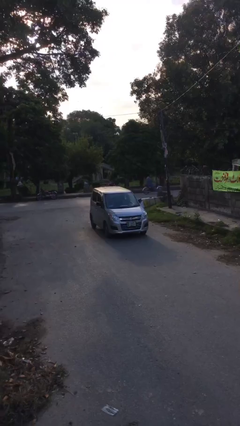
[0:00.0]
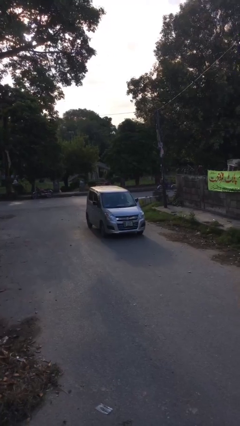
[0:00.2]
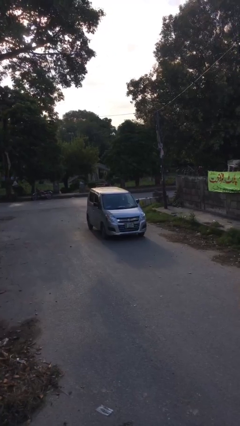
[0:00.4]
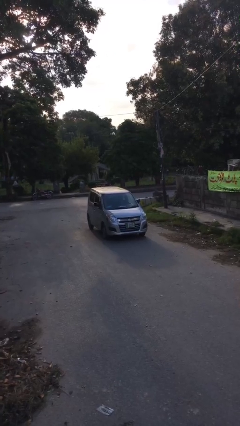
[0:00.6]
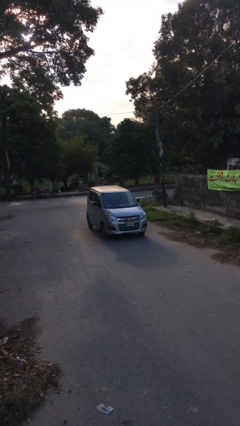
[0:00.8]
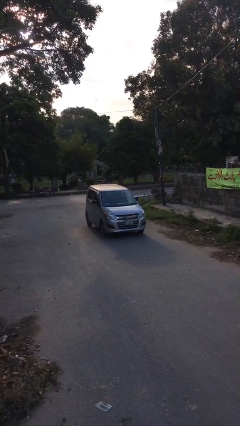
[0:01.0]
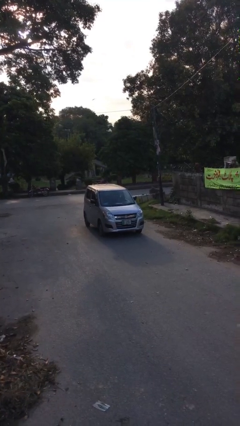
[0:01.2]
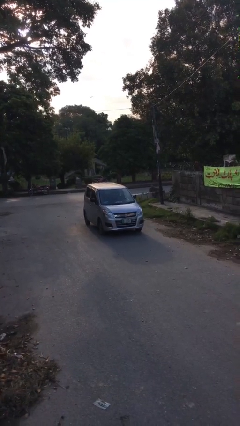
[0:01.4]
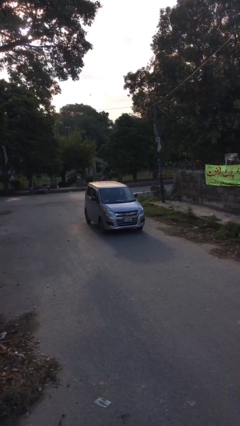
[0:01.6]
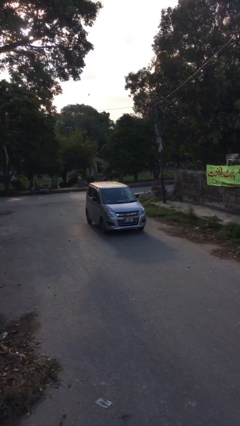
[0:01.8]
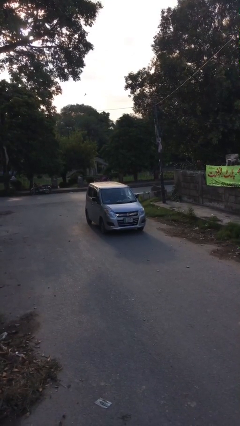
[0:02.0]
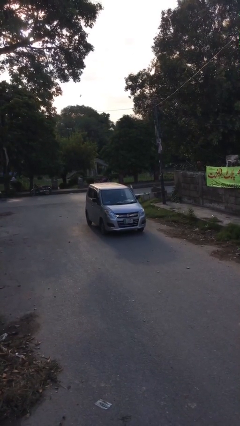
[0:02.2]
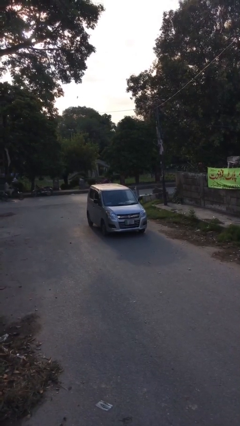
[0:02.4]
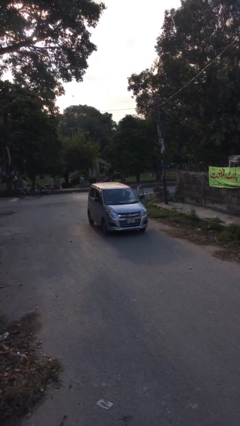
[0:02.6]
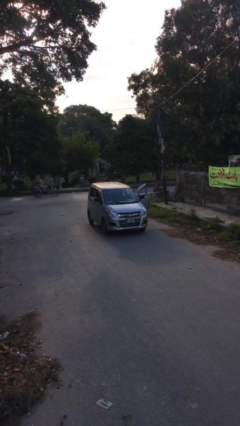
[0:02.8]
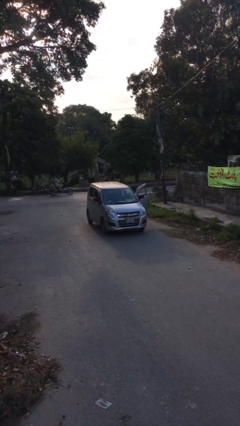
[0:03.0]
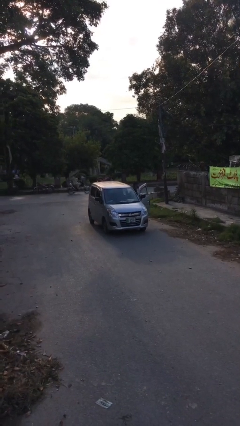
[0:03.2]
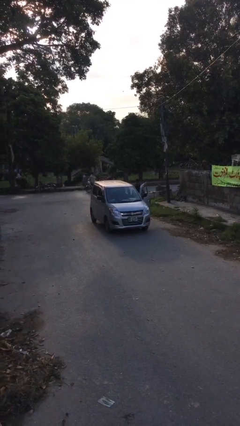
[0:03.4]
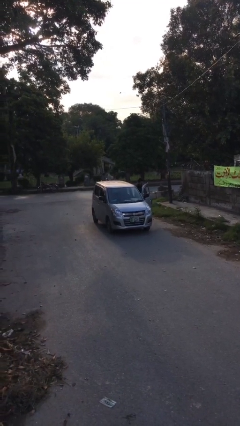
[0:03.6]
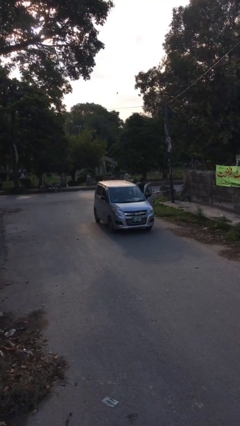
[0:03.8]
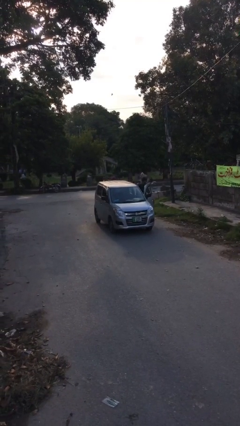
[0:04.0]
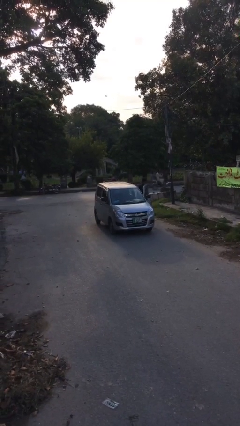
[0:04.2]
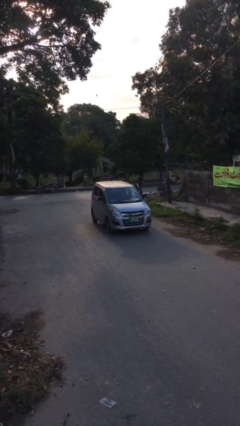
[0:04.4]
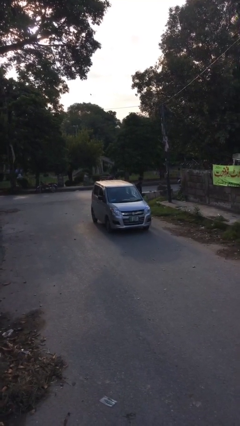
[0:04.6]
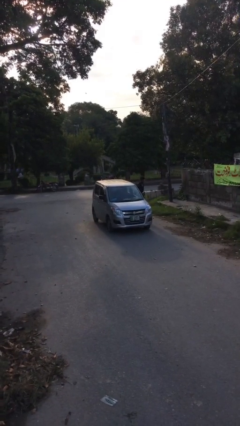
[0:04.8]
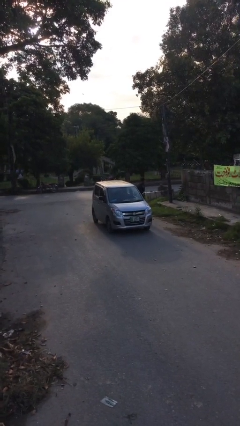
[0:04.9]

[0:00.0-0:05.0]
car drops off person

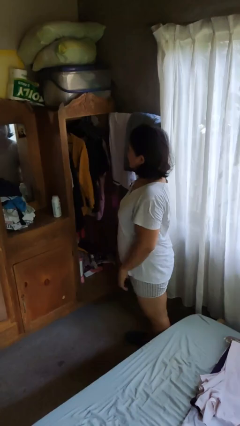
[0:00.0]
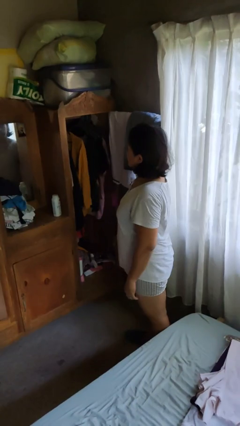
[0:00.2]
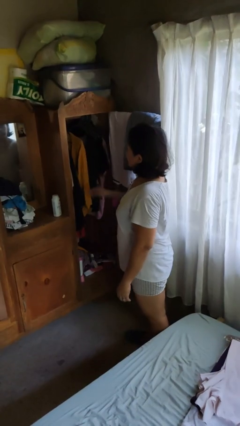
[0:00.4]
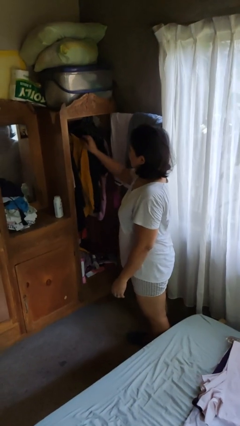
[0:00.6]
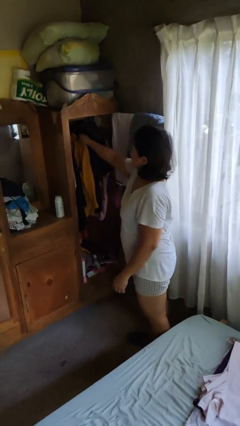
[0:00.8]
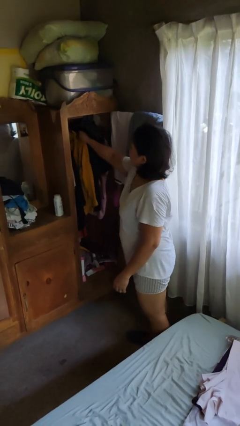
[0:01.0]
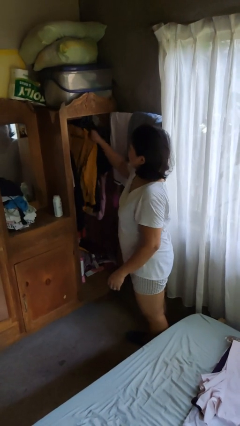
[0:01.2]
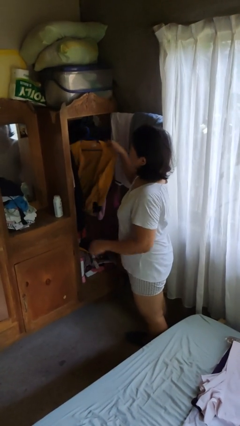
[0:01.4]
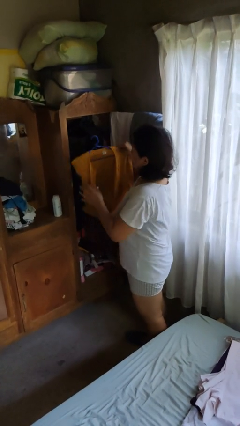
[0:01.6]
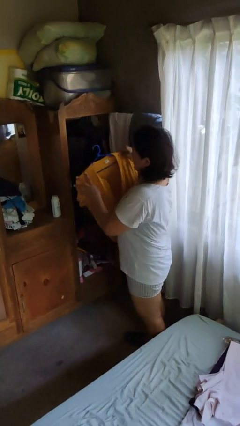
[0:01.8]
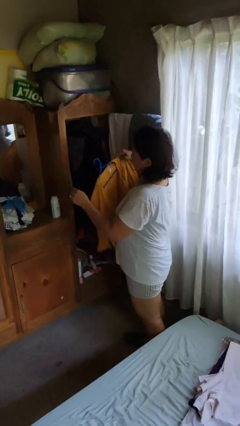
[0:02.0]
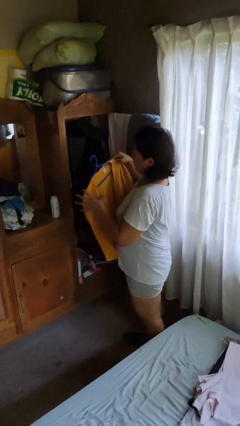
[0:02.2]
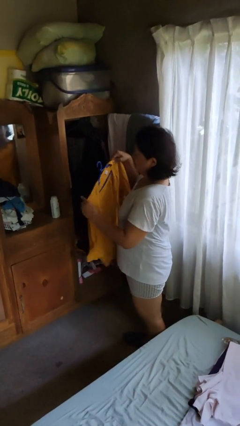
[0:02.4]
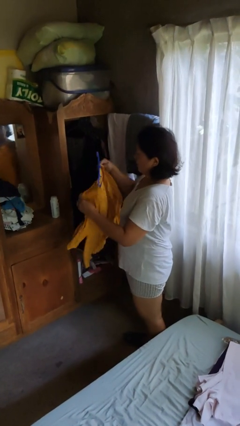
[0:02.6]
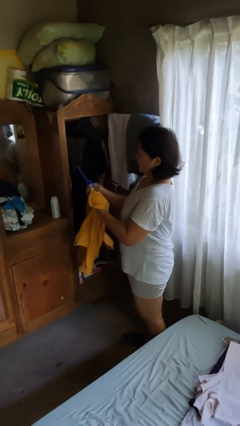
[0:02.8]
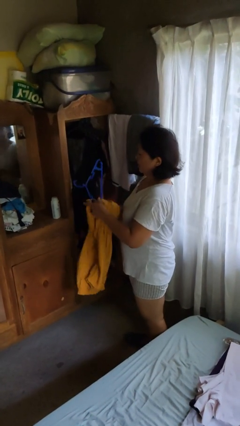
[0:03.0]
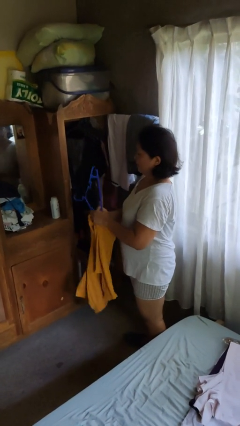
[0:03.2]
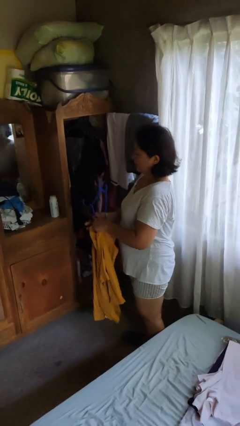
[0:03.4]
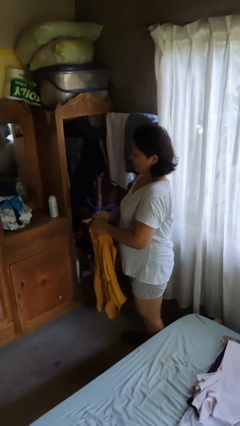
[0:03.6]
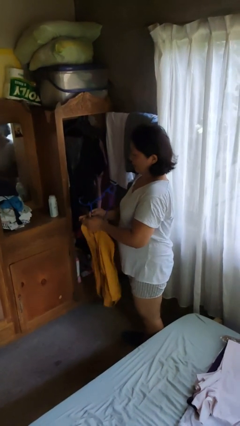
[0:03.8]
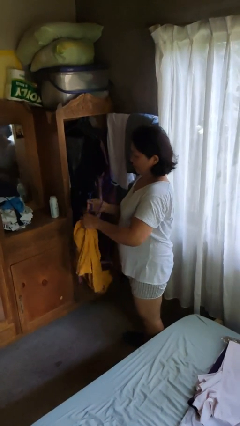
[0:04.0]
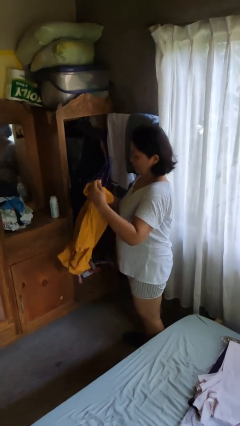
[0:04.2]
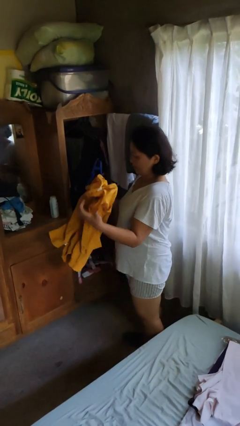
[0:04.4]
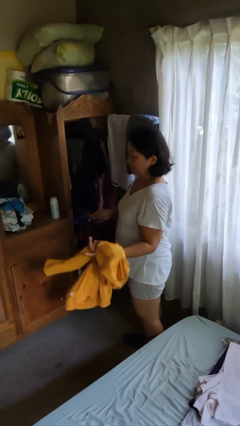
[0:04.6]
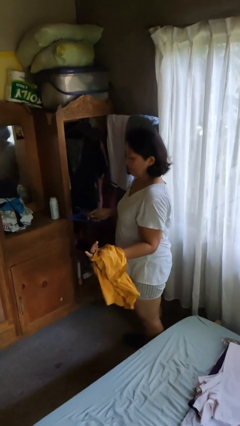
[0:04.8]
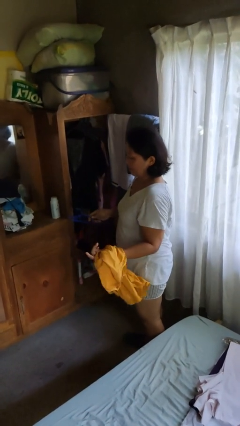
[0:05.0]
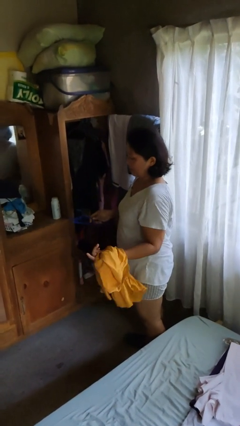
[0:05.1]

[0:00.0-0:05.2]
person takes clothes from closet

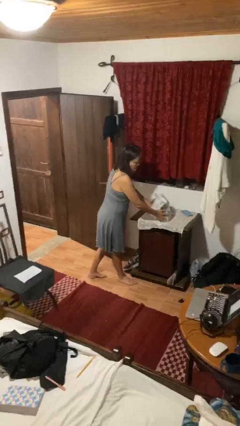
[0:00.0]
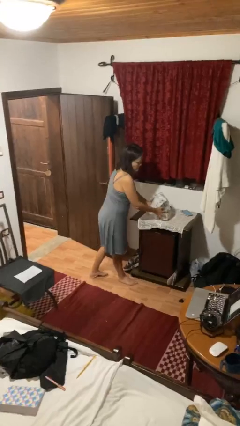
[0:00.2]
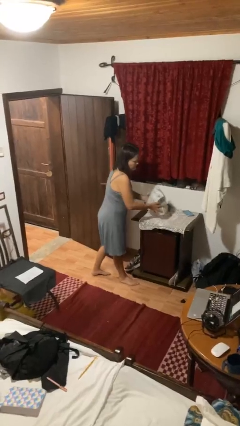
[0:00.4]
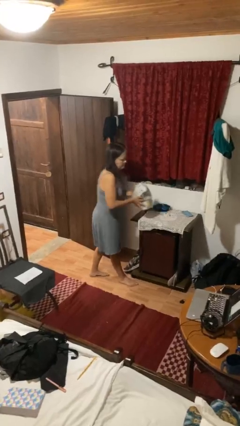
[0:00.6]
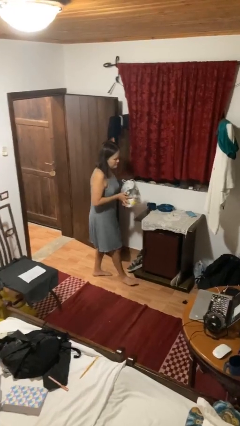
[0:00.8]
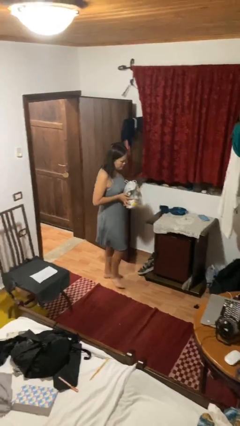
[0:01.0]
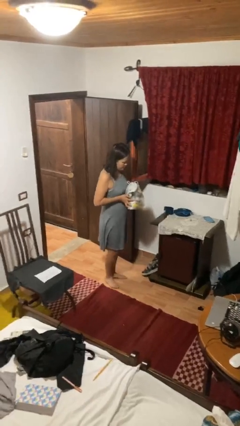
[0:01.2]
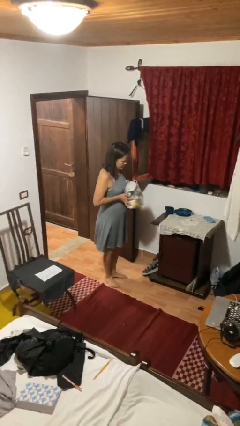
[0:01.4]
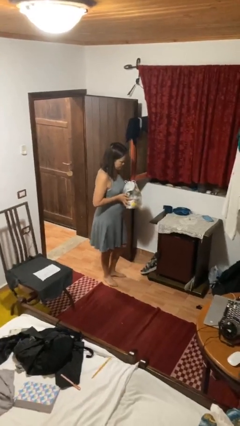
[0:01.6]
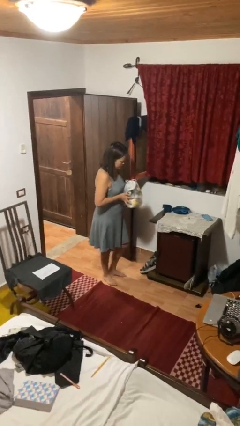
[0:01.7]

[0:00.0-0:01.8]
person picks up object from countertop

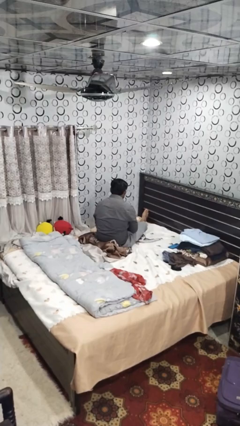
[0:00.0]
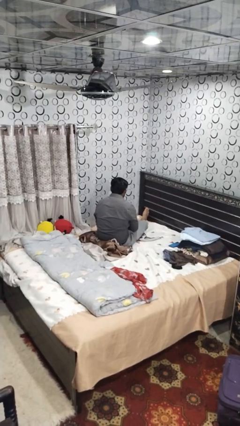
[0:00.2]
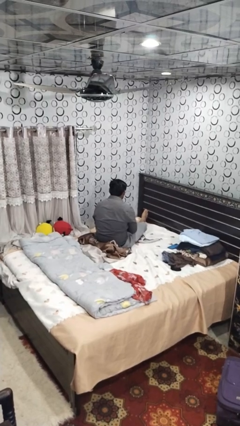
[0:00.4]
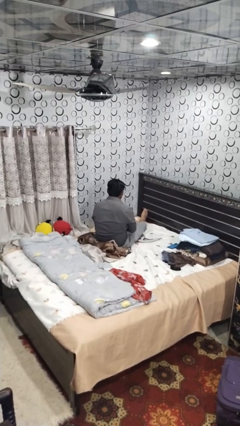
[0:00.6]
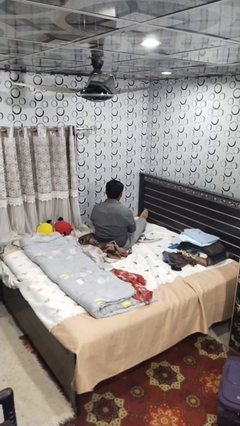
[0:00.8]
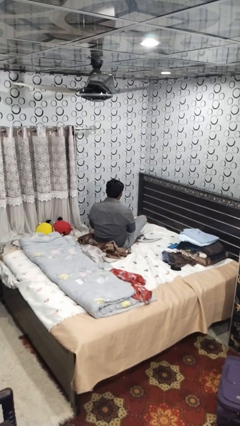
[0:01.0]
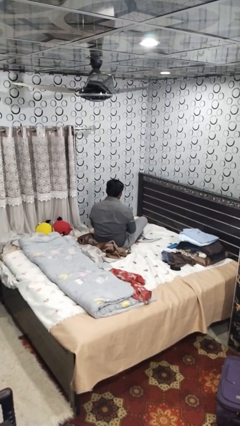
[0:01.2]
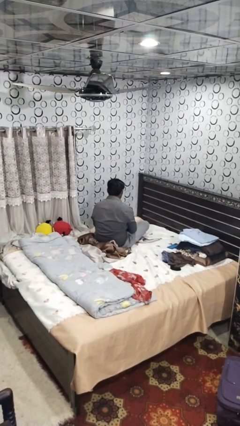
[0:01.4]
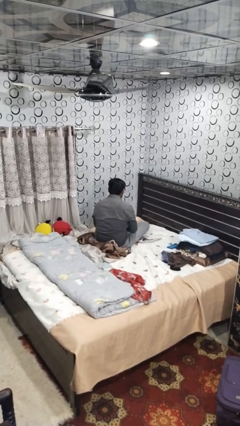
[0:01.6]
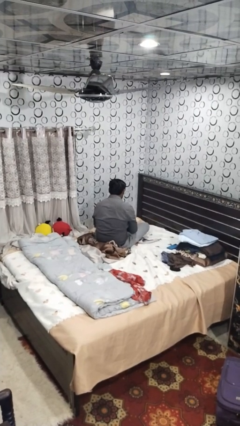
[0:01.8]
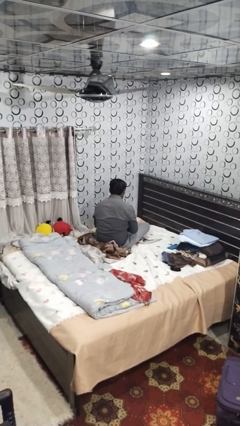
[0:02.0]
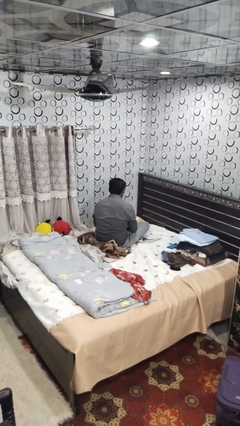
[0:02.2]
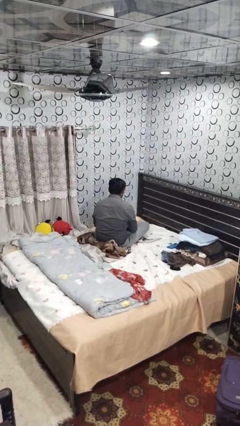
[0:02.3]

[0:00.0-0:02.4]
person crosses legs

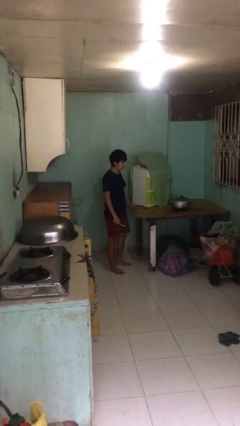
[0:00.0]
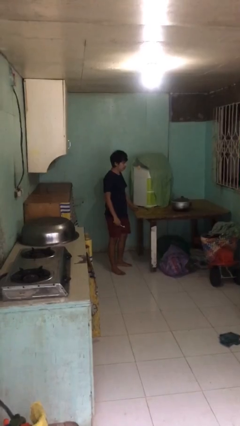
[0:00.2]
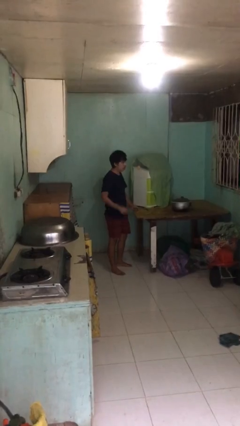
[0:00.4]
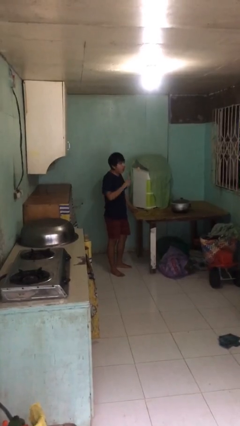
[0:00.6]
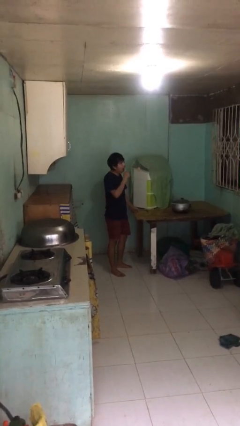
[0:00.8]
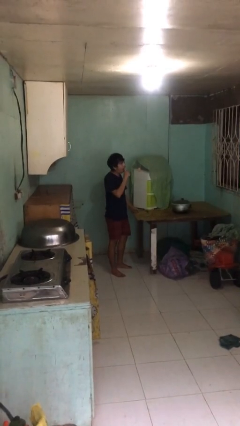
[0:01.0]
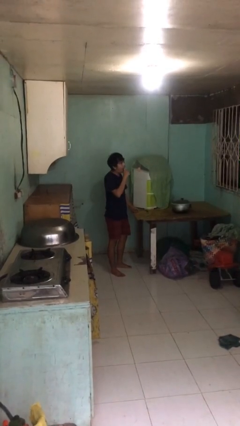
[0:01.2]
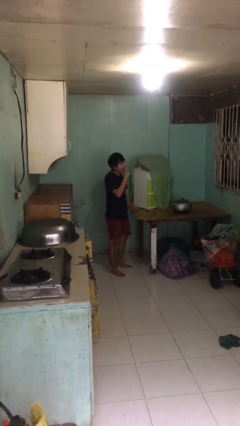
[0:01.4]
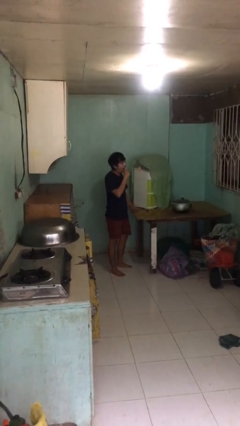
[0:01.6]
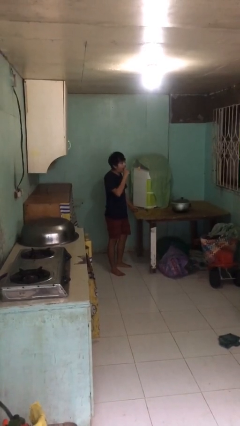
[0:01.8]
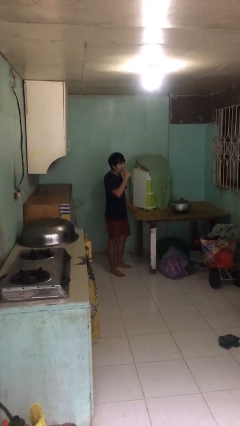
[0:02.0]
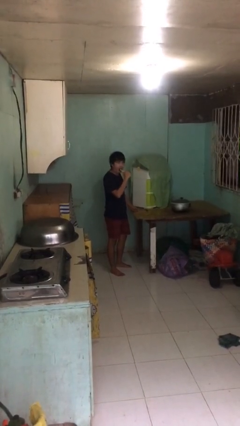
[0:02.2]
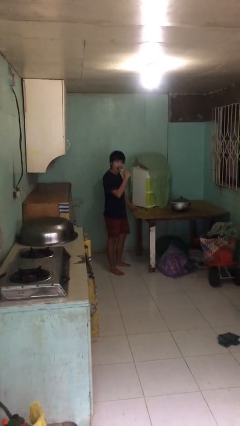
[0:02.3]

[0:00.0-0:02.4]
person brushes teeth

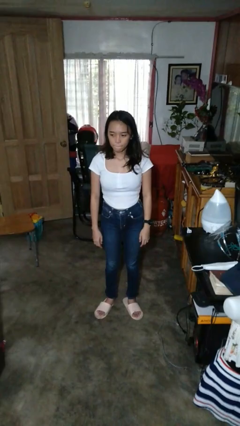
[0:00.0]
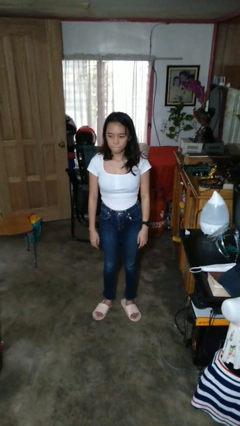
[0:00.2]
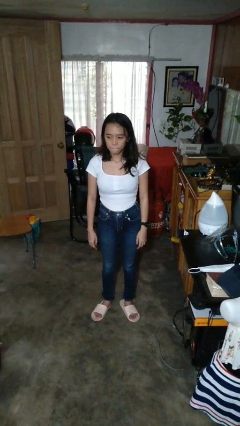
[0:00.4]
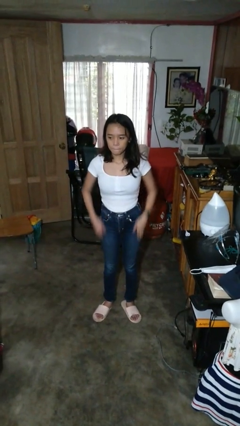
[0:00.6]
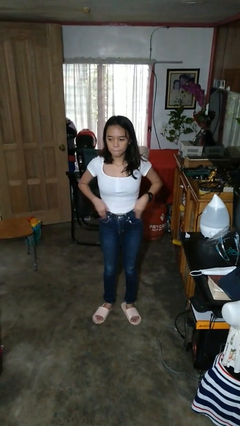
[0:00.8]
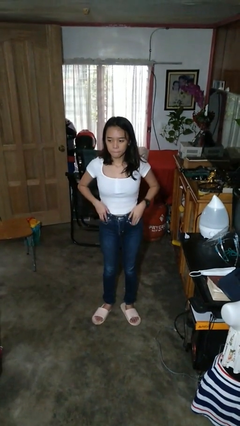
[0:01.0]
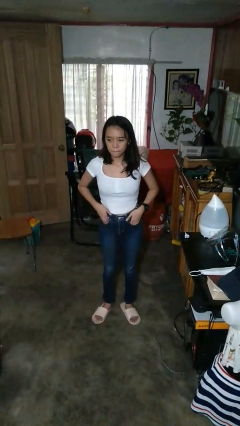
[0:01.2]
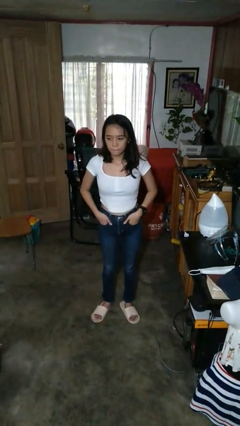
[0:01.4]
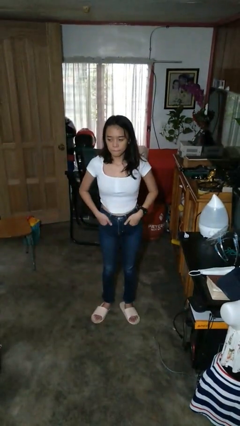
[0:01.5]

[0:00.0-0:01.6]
person puts hands in back pockets
